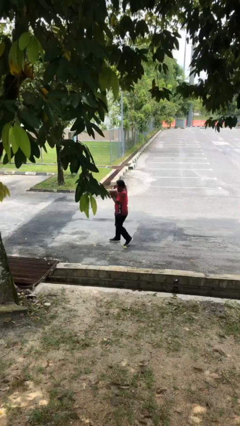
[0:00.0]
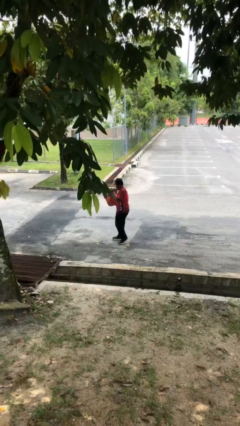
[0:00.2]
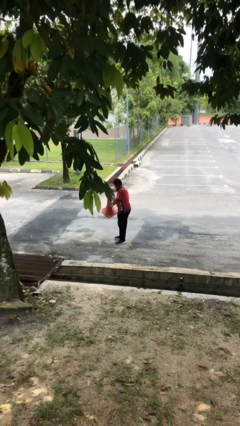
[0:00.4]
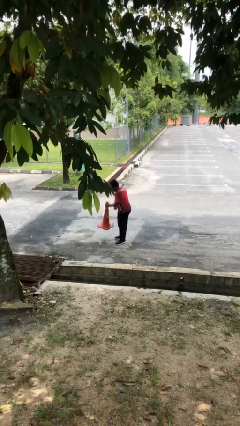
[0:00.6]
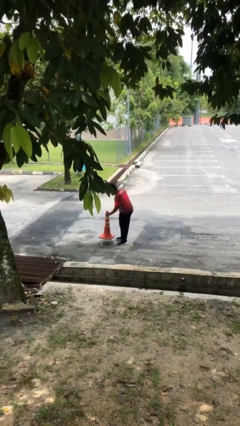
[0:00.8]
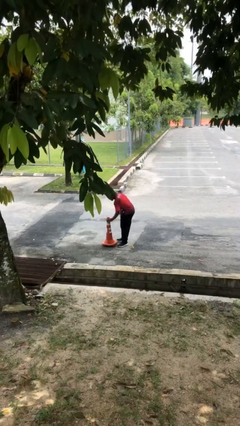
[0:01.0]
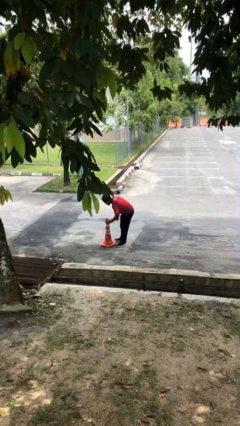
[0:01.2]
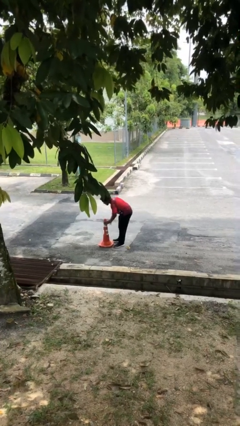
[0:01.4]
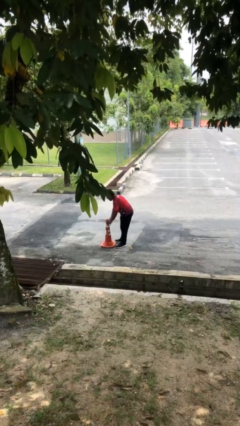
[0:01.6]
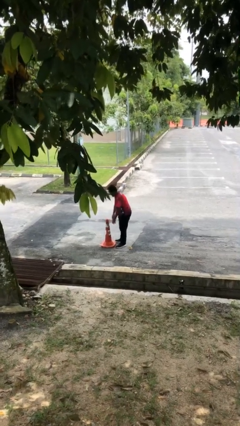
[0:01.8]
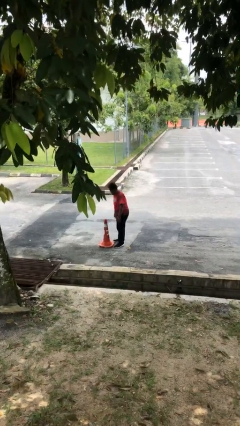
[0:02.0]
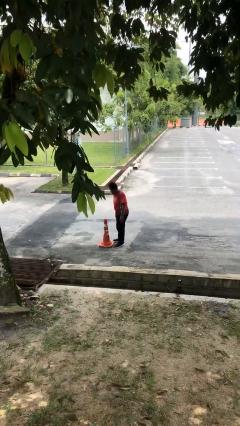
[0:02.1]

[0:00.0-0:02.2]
person puts down object on floor

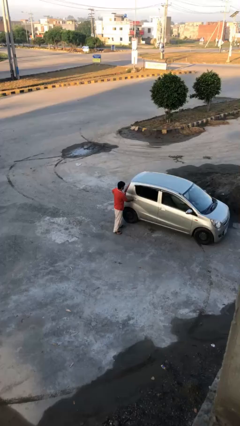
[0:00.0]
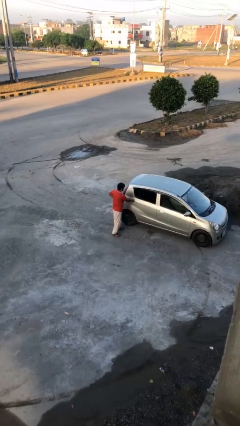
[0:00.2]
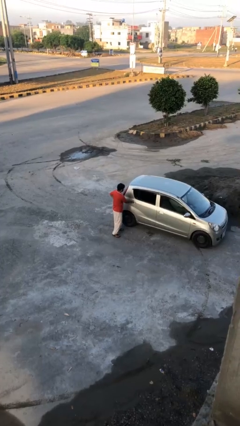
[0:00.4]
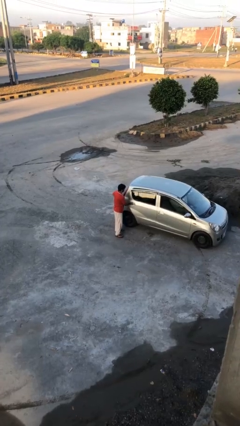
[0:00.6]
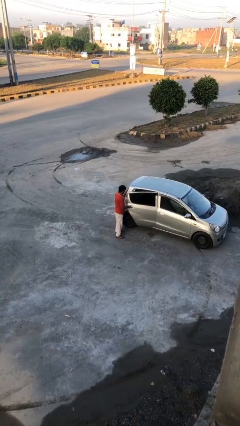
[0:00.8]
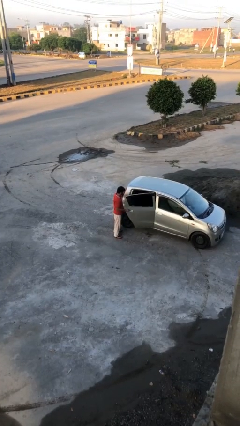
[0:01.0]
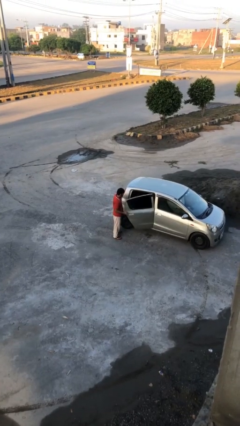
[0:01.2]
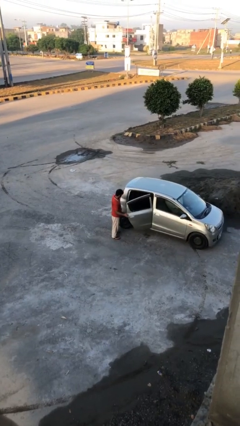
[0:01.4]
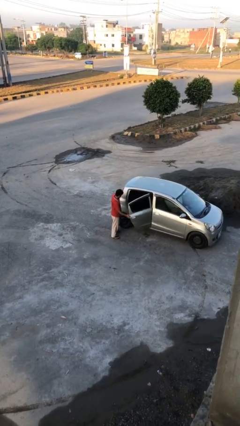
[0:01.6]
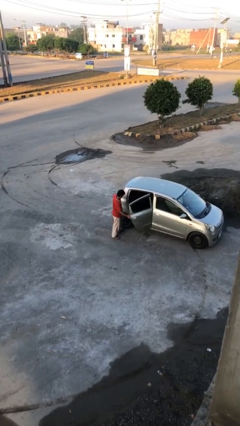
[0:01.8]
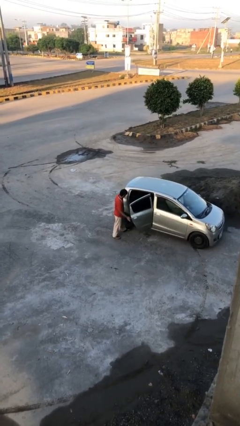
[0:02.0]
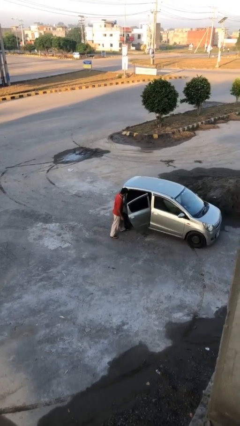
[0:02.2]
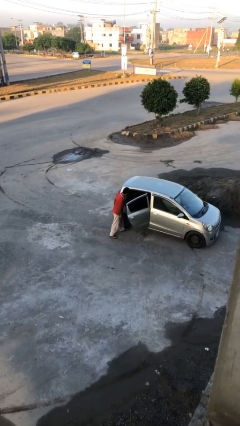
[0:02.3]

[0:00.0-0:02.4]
person opens car door

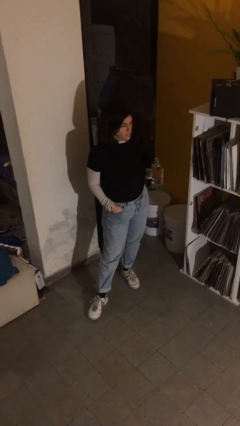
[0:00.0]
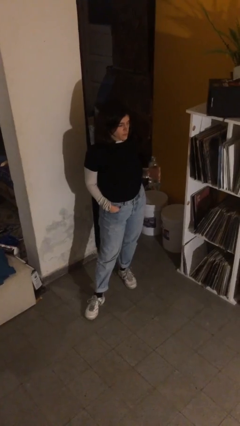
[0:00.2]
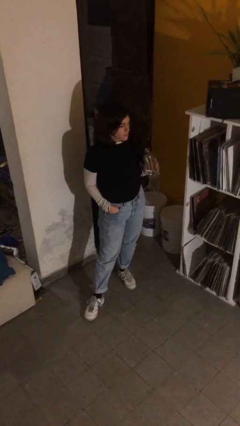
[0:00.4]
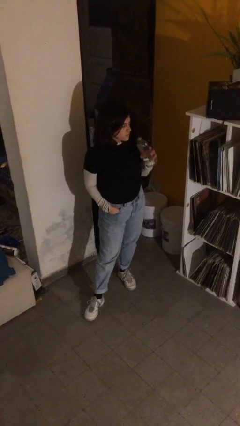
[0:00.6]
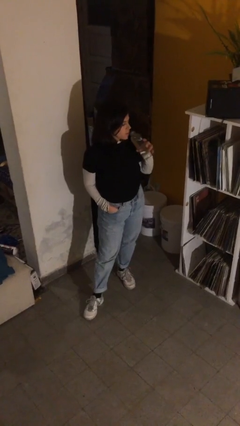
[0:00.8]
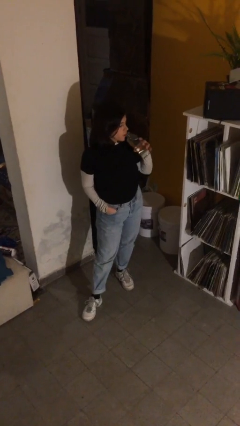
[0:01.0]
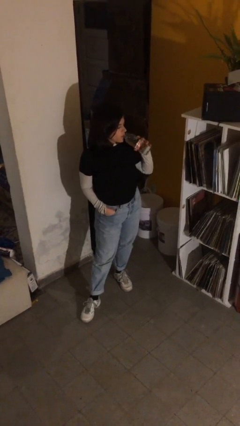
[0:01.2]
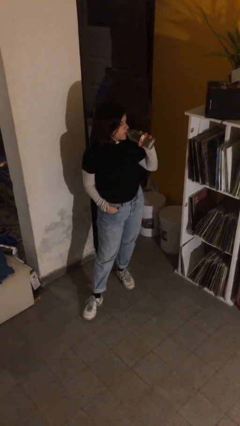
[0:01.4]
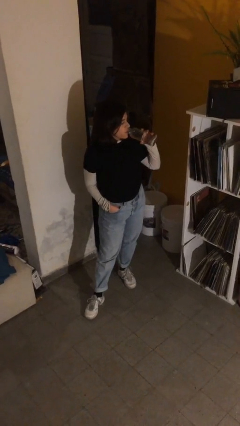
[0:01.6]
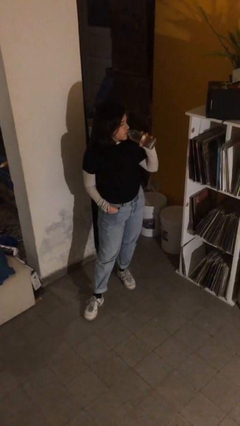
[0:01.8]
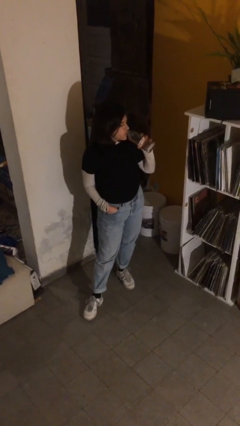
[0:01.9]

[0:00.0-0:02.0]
person drinks from bottle

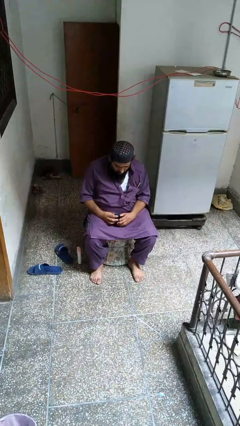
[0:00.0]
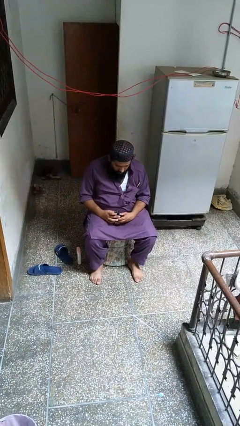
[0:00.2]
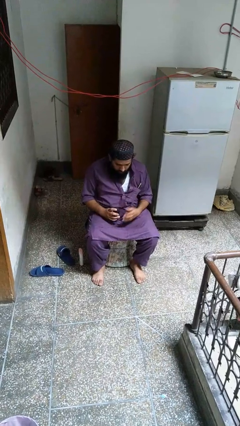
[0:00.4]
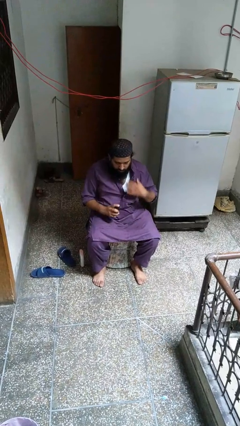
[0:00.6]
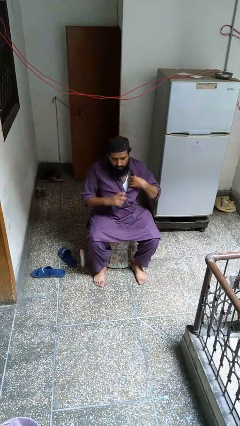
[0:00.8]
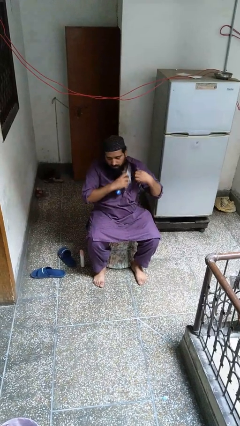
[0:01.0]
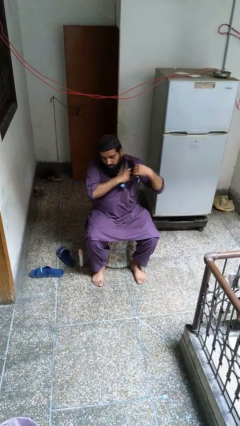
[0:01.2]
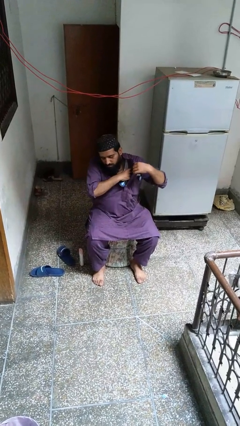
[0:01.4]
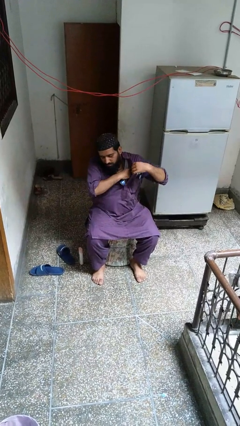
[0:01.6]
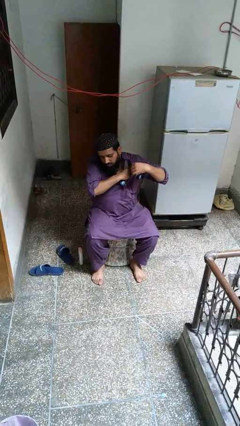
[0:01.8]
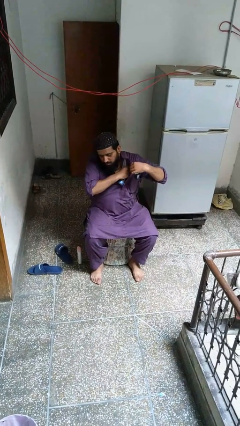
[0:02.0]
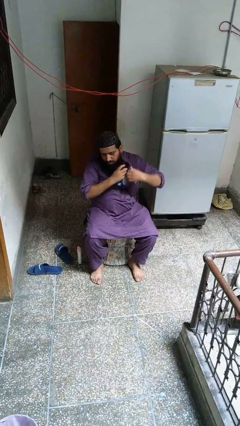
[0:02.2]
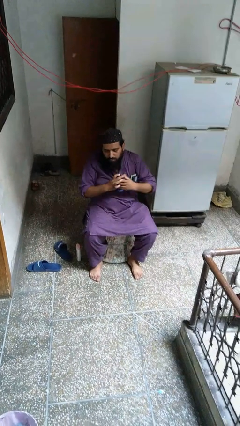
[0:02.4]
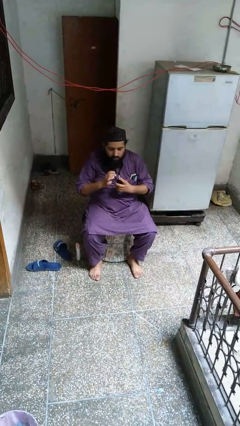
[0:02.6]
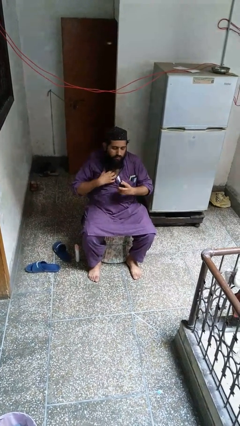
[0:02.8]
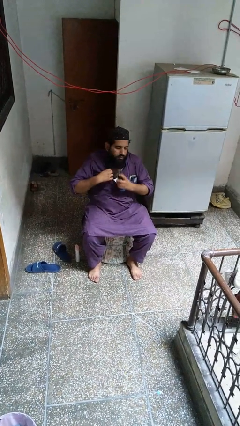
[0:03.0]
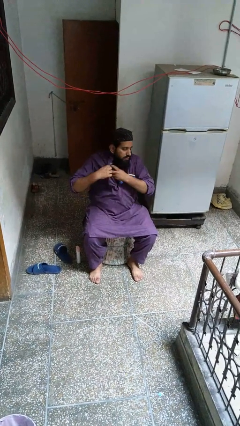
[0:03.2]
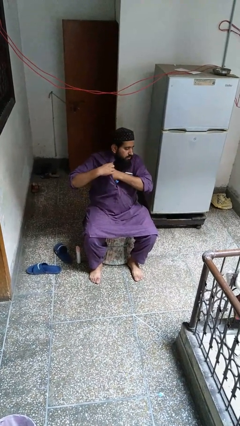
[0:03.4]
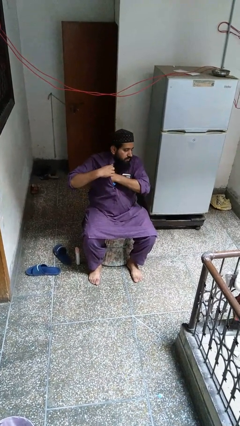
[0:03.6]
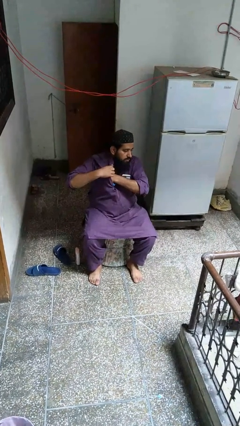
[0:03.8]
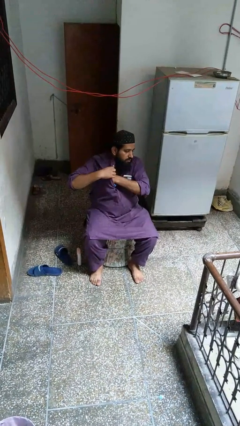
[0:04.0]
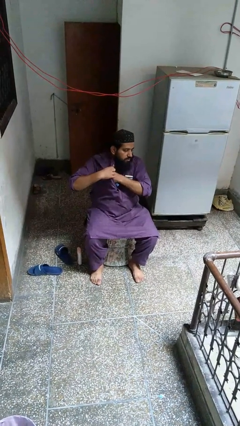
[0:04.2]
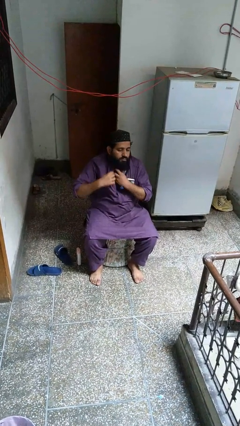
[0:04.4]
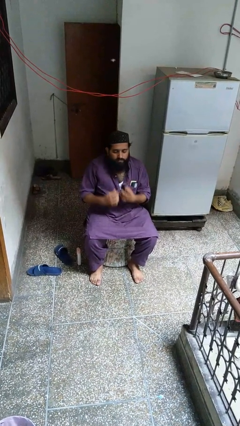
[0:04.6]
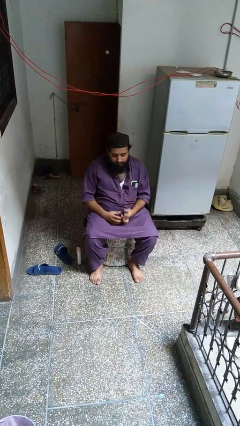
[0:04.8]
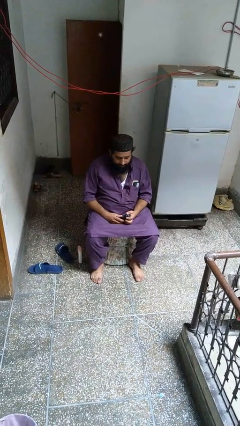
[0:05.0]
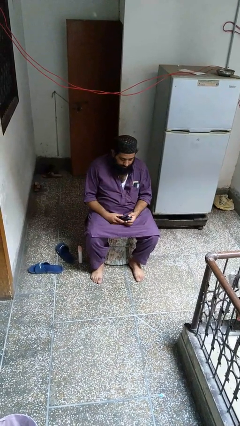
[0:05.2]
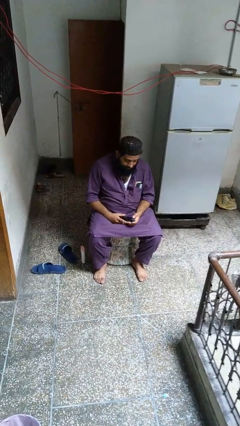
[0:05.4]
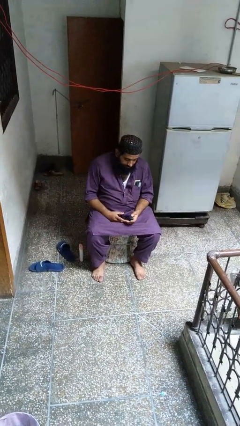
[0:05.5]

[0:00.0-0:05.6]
person applies deodorant

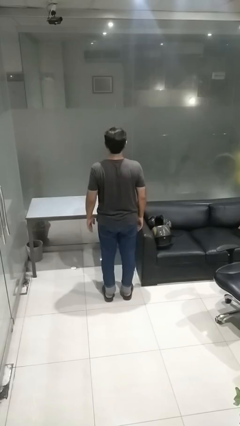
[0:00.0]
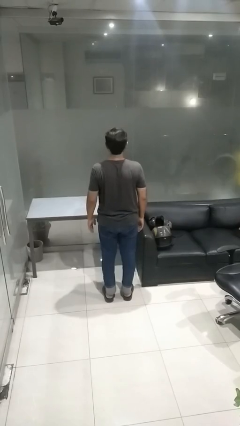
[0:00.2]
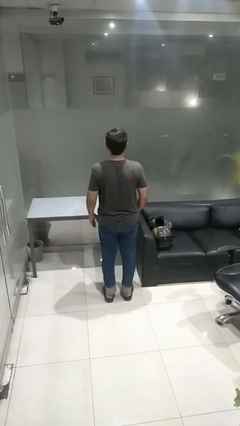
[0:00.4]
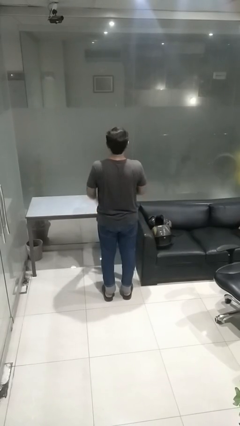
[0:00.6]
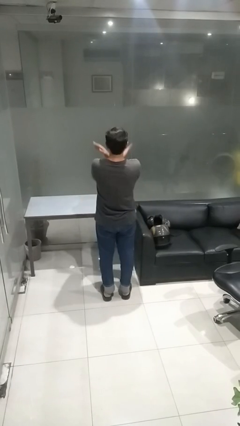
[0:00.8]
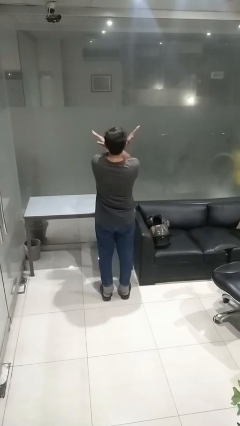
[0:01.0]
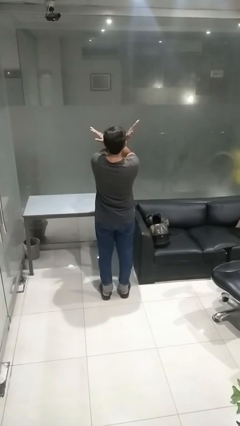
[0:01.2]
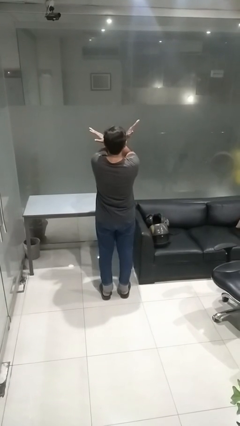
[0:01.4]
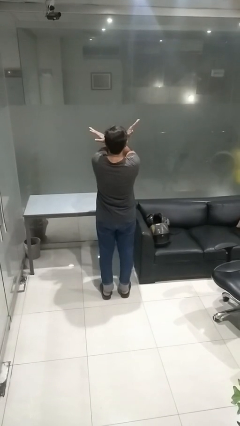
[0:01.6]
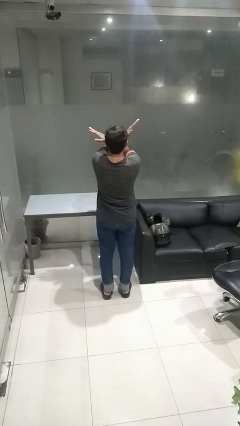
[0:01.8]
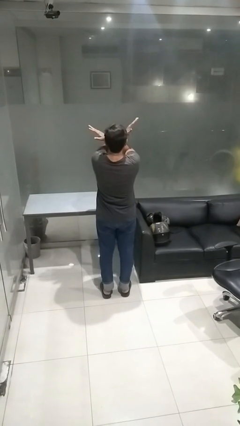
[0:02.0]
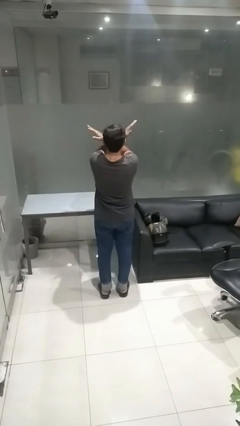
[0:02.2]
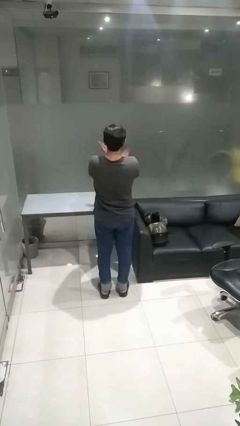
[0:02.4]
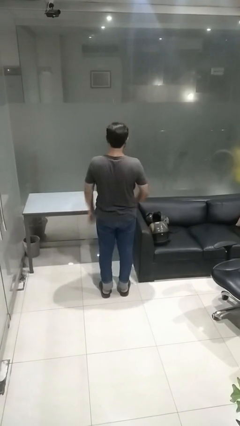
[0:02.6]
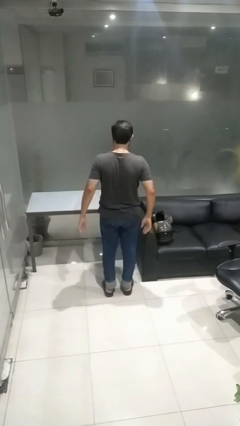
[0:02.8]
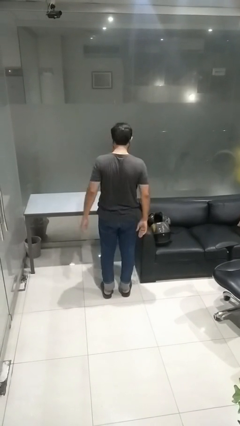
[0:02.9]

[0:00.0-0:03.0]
person gestures arms x

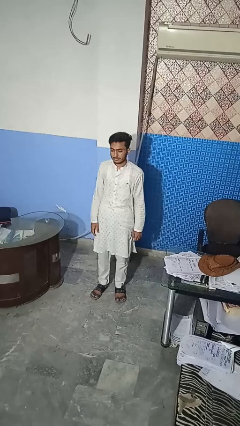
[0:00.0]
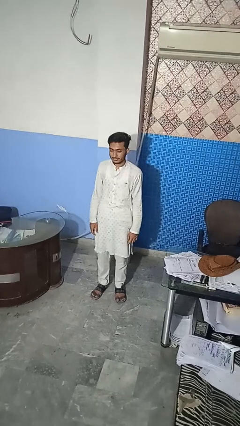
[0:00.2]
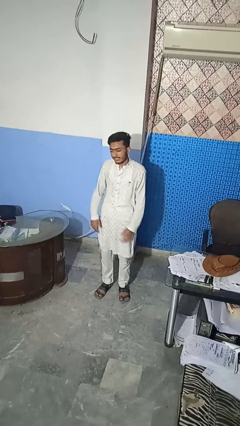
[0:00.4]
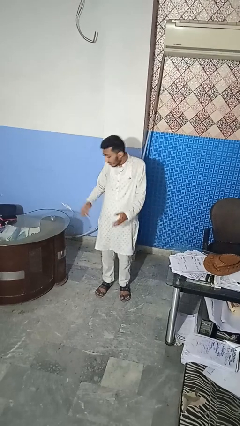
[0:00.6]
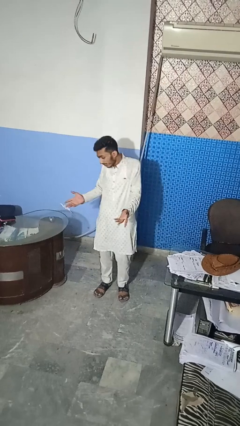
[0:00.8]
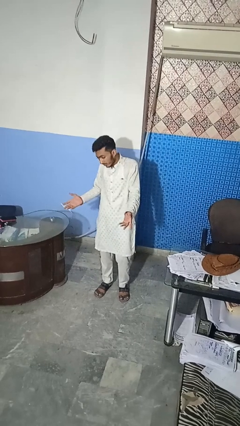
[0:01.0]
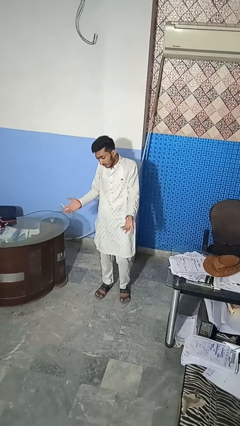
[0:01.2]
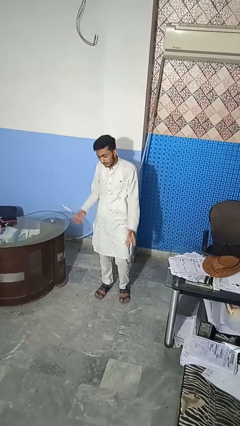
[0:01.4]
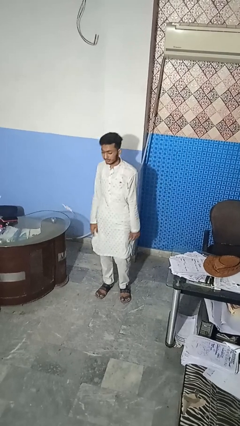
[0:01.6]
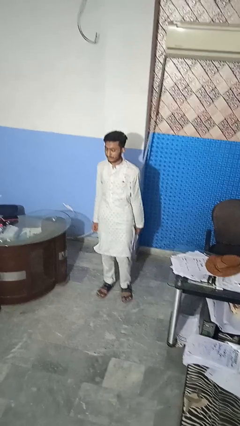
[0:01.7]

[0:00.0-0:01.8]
person shrugs

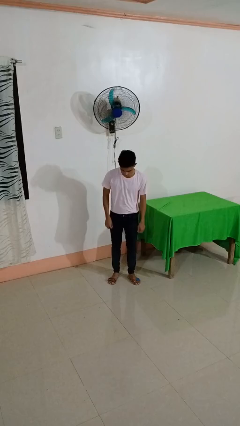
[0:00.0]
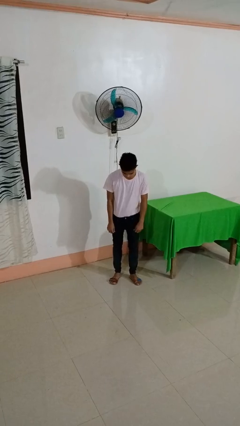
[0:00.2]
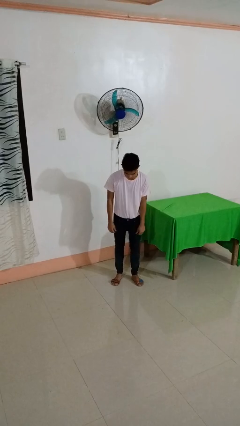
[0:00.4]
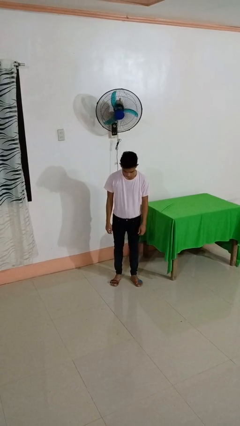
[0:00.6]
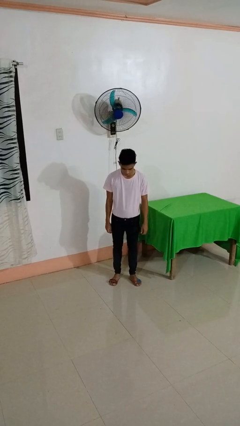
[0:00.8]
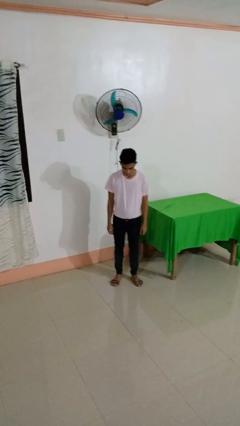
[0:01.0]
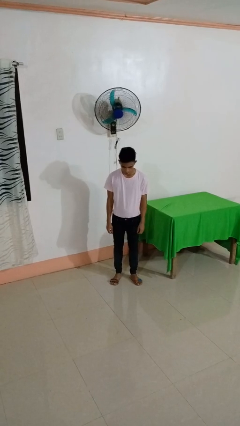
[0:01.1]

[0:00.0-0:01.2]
person hikes up pants
